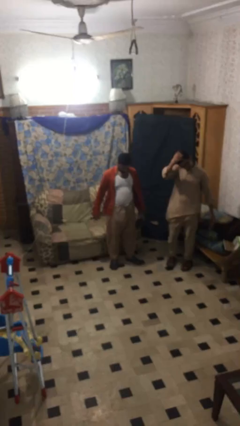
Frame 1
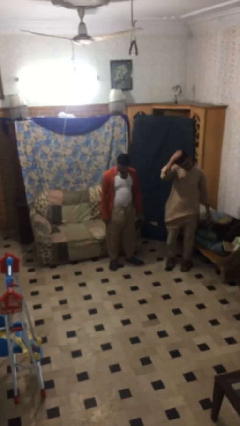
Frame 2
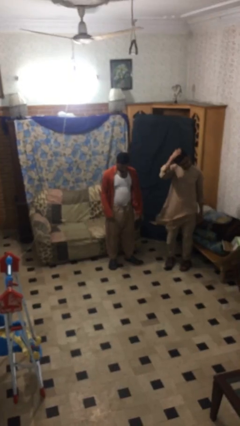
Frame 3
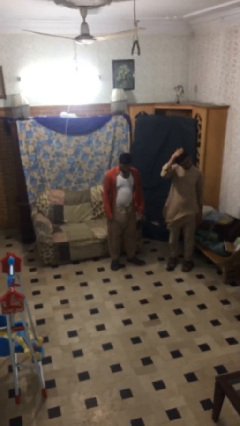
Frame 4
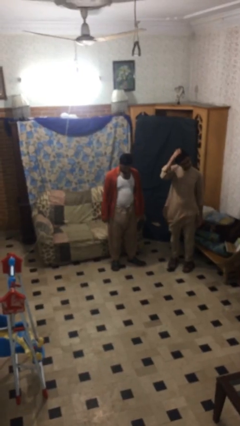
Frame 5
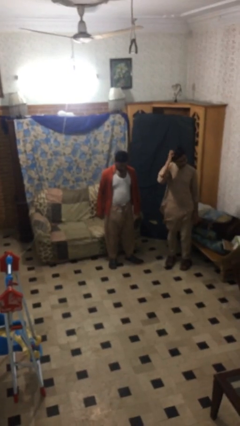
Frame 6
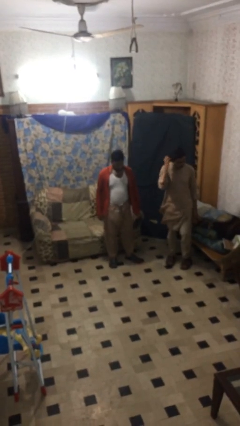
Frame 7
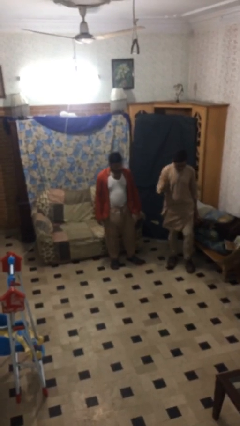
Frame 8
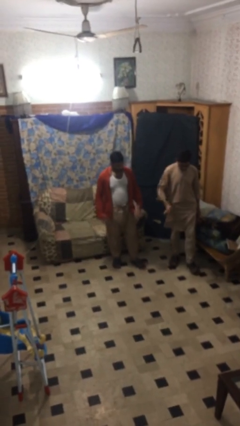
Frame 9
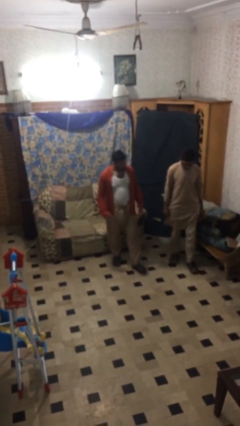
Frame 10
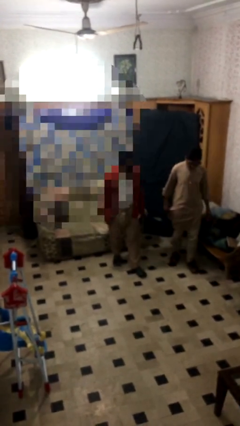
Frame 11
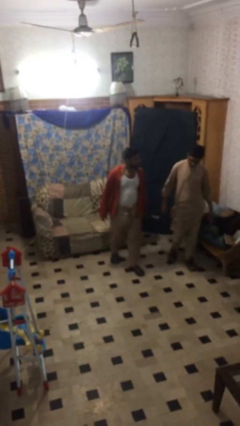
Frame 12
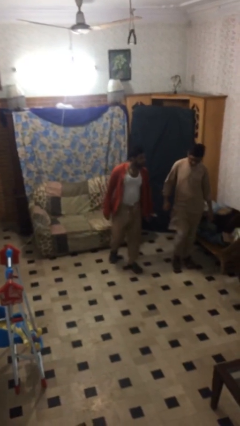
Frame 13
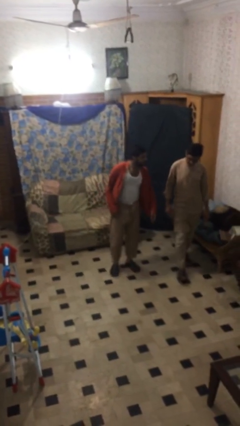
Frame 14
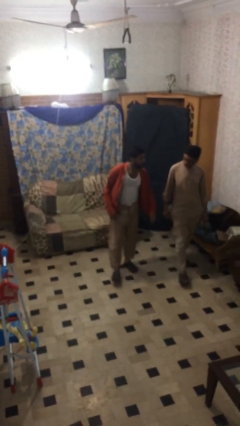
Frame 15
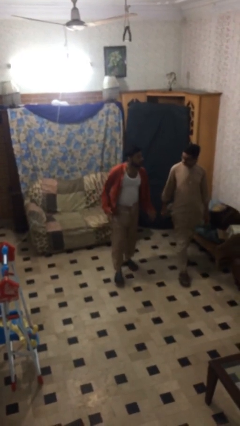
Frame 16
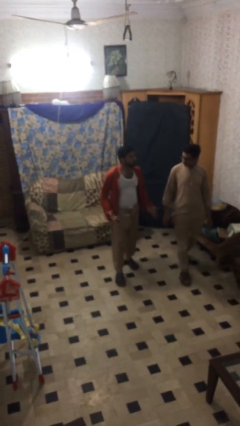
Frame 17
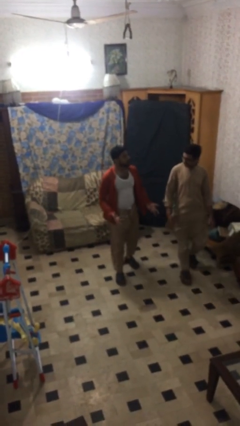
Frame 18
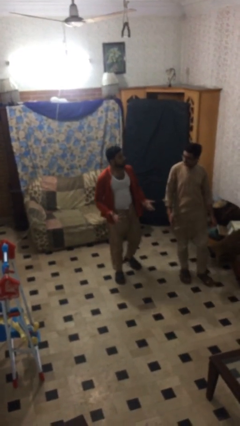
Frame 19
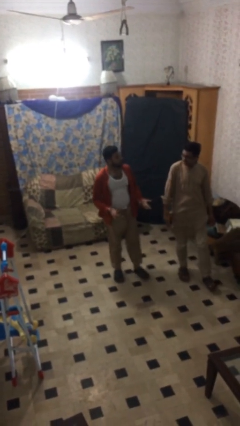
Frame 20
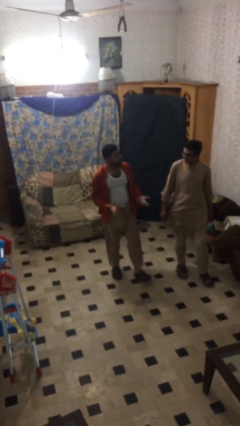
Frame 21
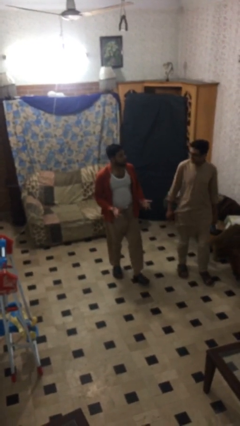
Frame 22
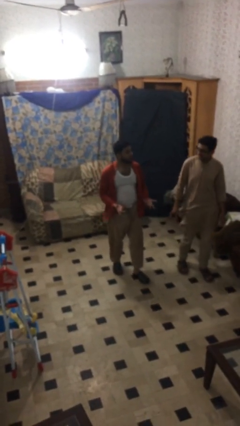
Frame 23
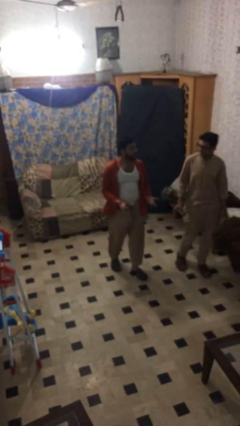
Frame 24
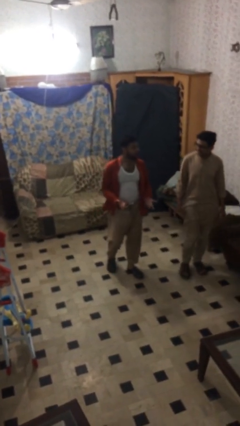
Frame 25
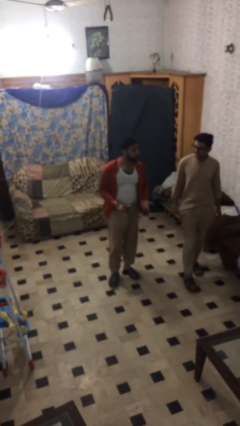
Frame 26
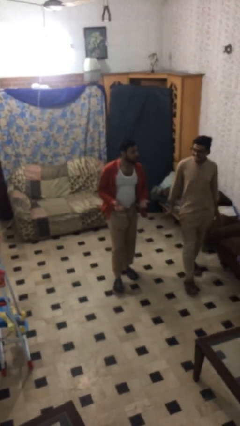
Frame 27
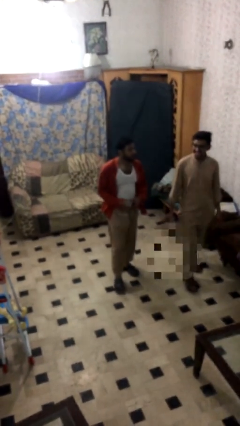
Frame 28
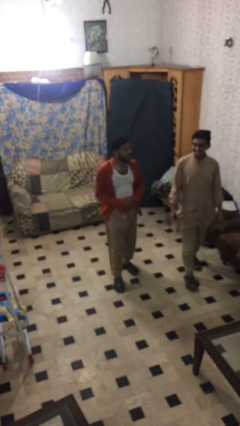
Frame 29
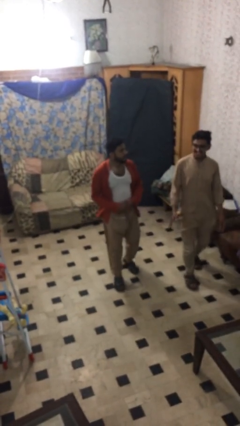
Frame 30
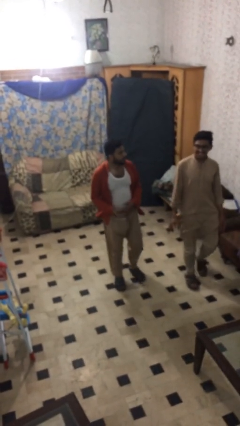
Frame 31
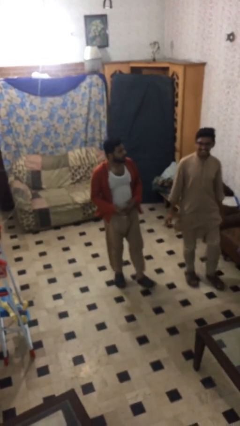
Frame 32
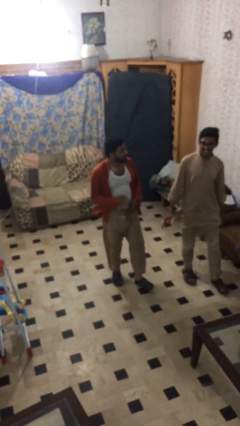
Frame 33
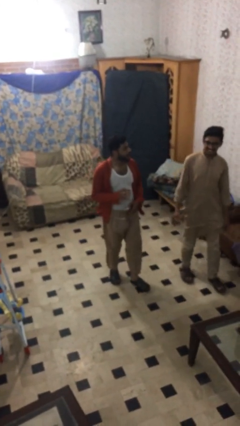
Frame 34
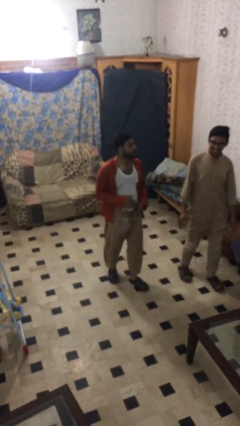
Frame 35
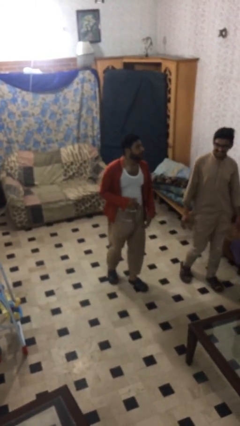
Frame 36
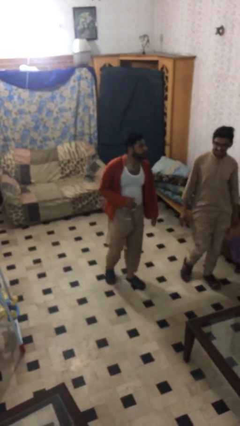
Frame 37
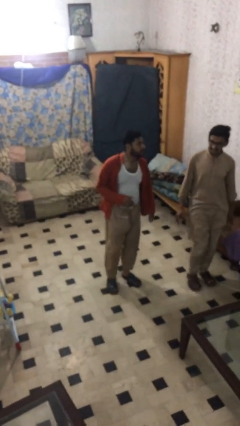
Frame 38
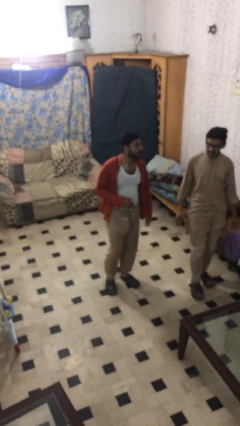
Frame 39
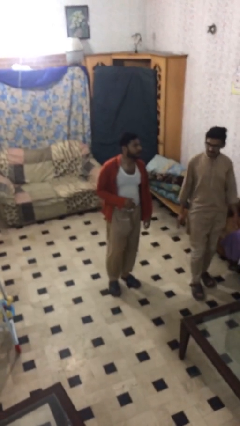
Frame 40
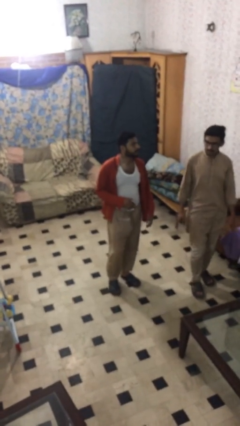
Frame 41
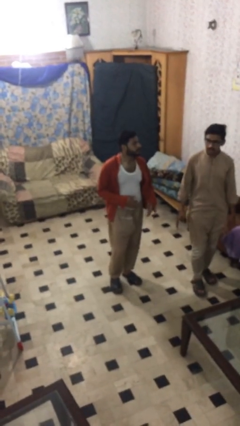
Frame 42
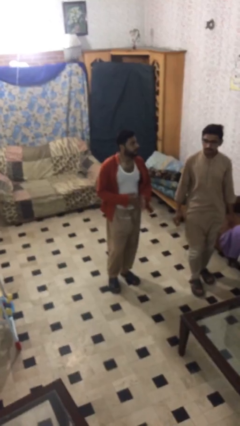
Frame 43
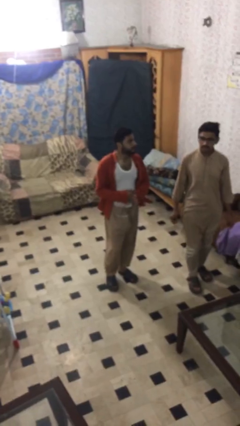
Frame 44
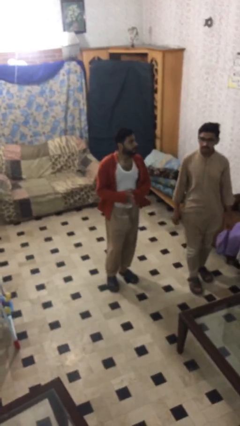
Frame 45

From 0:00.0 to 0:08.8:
person talks to person

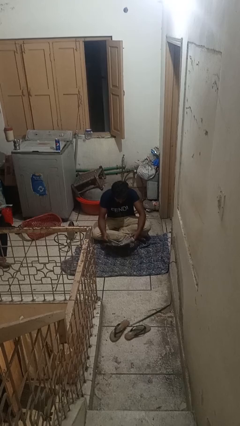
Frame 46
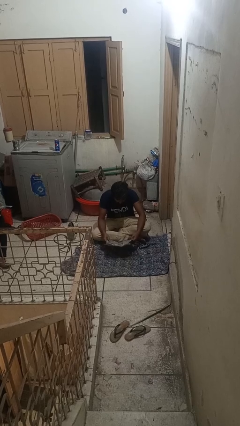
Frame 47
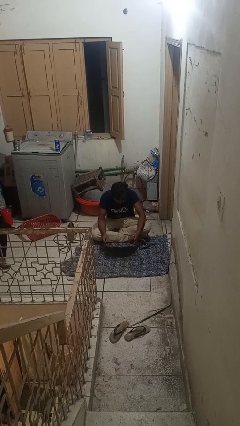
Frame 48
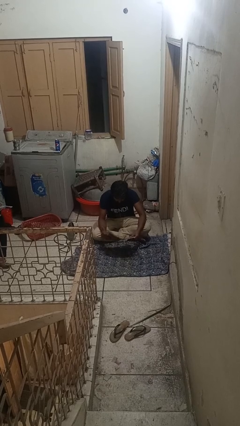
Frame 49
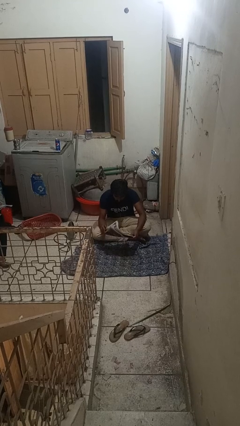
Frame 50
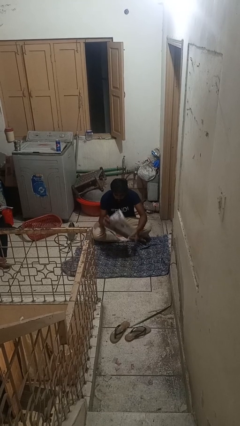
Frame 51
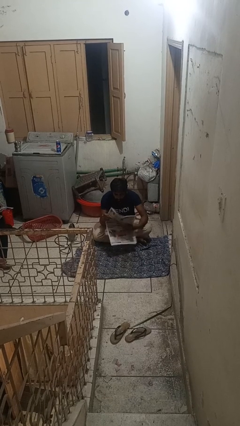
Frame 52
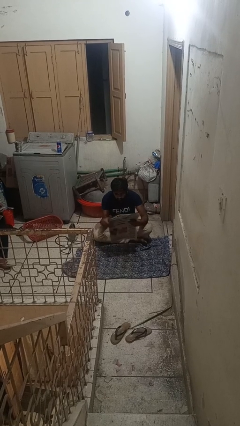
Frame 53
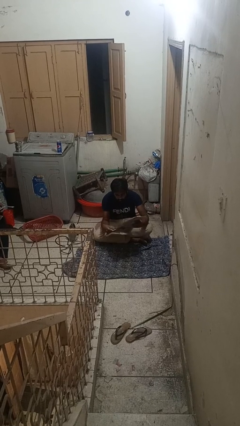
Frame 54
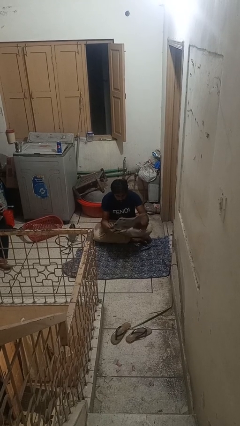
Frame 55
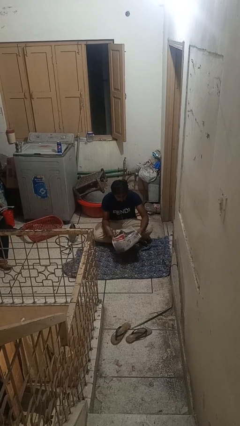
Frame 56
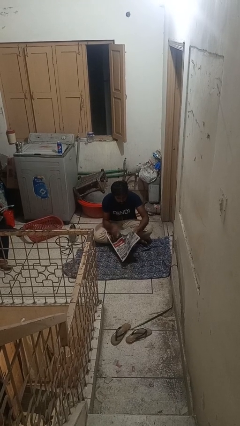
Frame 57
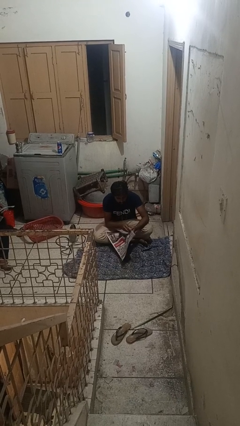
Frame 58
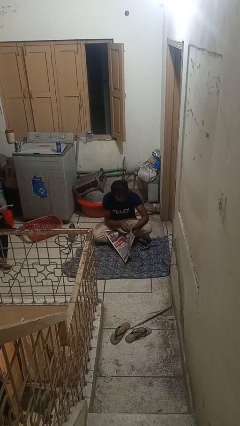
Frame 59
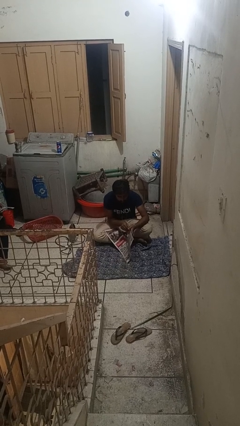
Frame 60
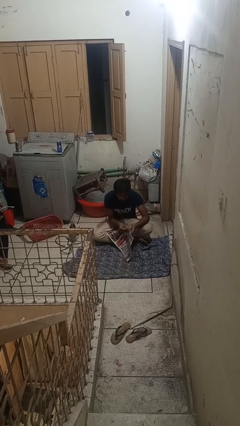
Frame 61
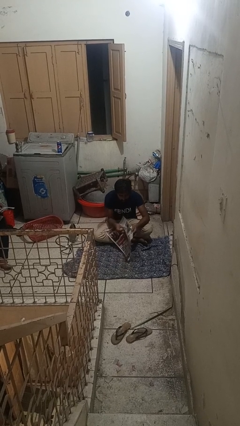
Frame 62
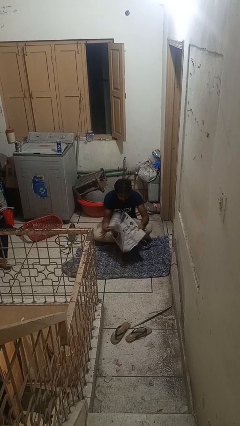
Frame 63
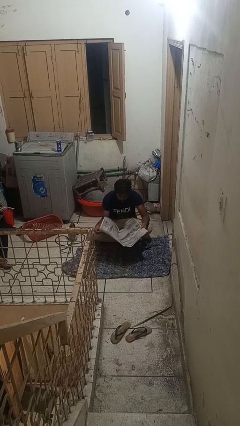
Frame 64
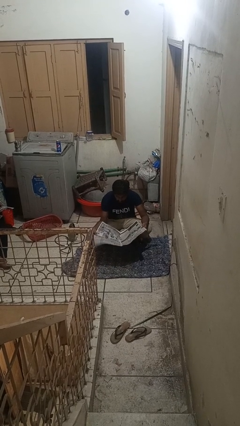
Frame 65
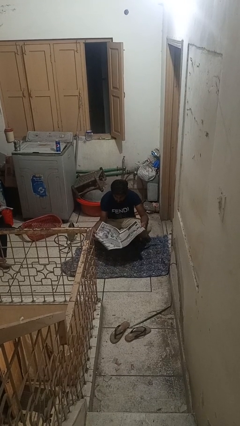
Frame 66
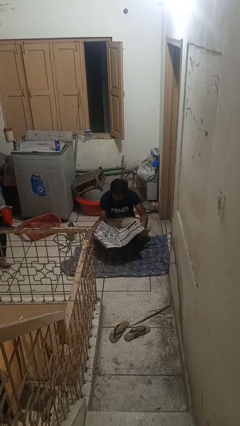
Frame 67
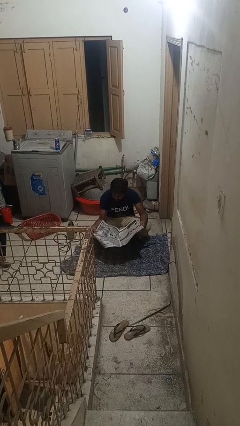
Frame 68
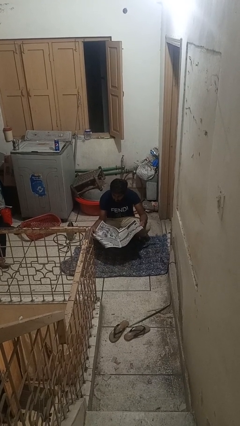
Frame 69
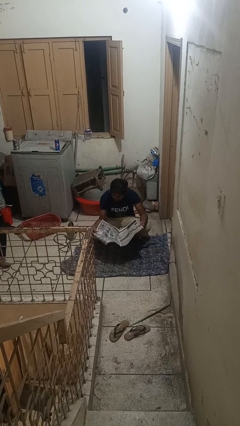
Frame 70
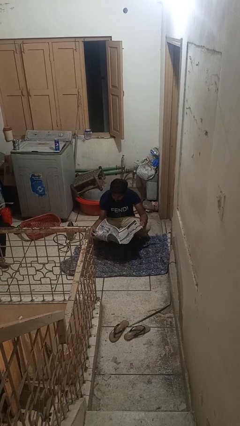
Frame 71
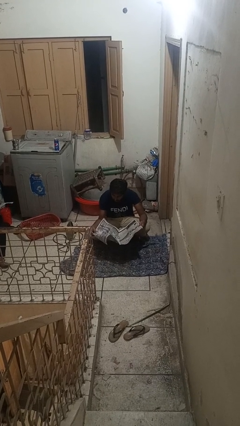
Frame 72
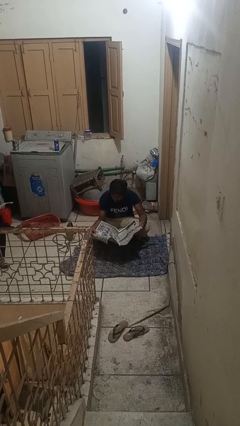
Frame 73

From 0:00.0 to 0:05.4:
person reads newspaper

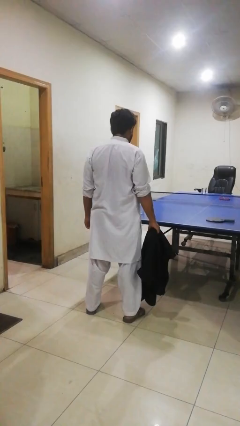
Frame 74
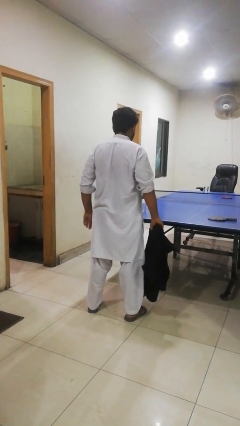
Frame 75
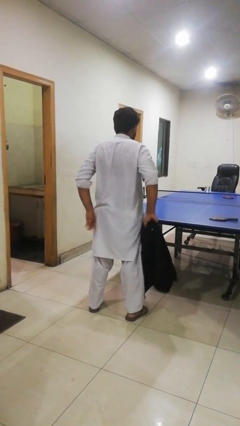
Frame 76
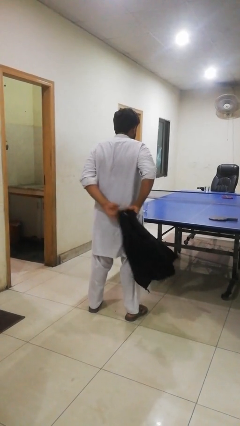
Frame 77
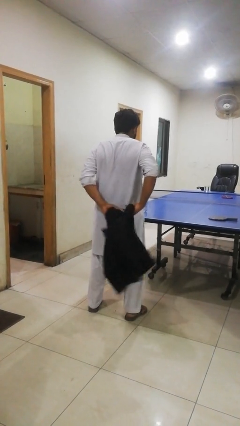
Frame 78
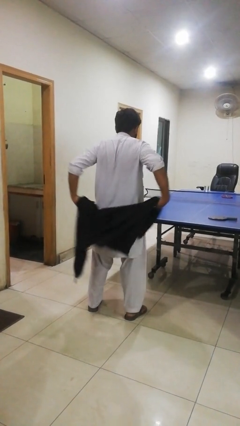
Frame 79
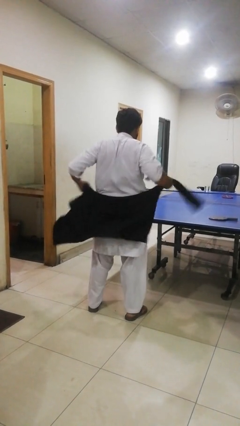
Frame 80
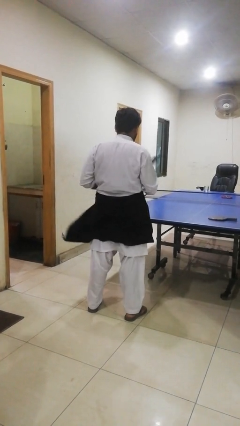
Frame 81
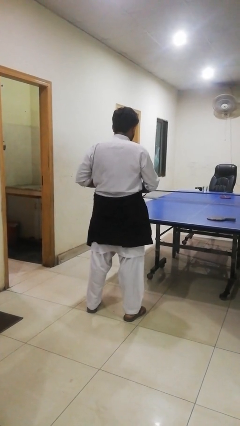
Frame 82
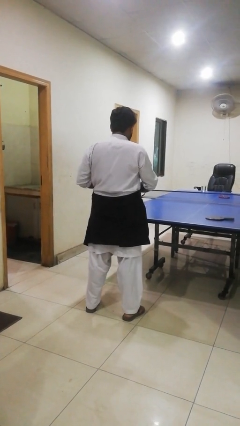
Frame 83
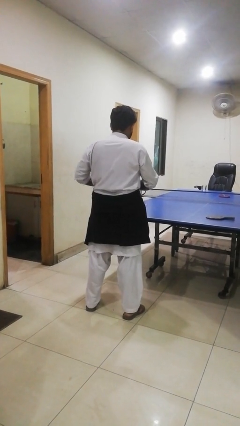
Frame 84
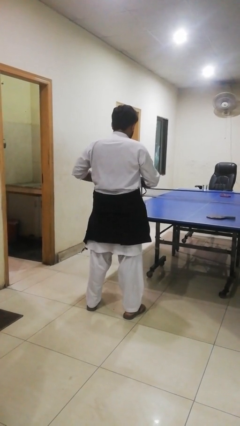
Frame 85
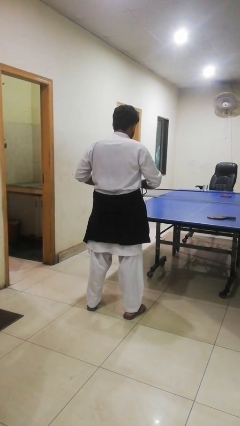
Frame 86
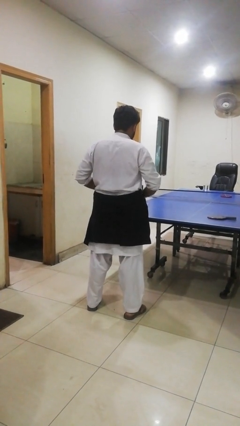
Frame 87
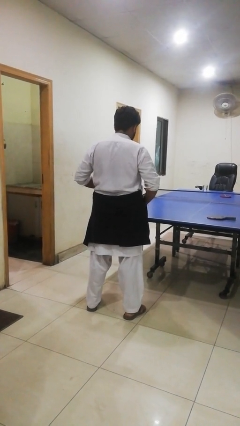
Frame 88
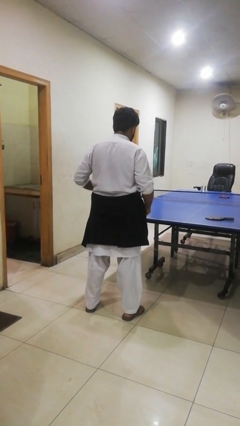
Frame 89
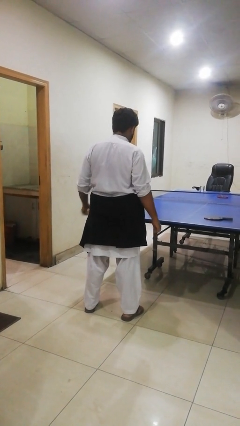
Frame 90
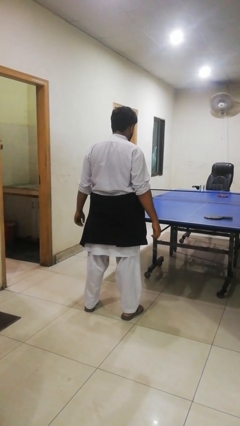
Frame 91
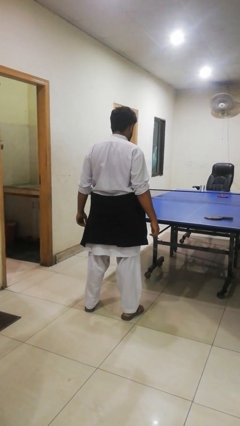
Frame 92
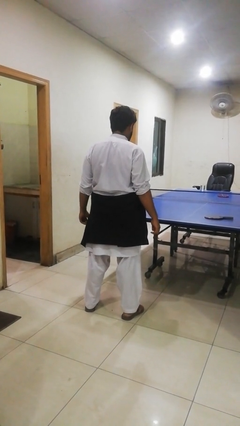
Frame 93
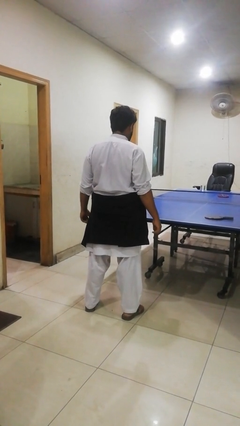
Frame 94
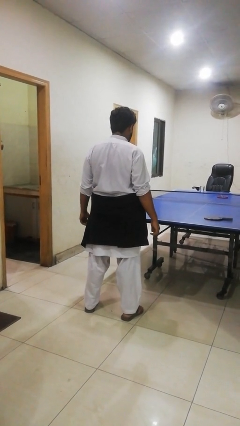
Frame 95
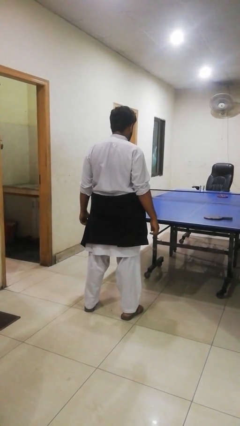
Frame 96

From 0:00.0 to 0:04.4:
person ties jacket around waist
